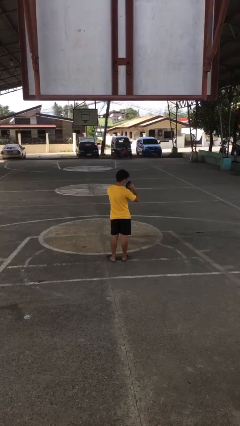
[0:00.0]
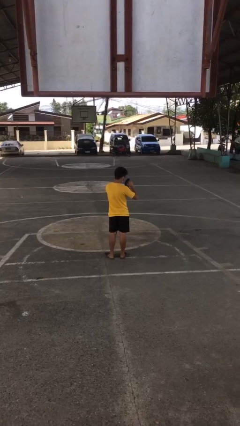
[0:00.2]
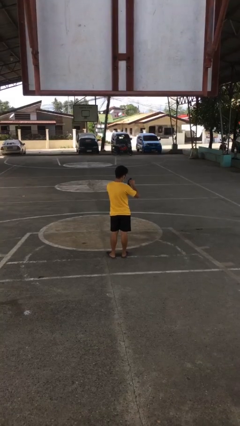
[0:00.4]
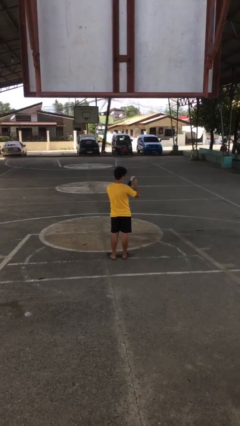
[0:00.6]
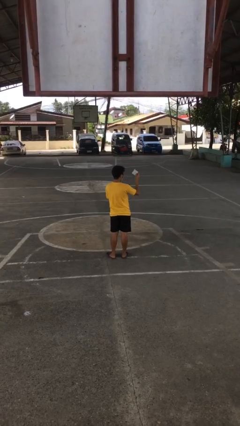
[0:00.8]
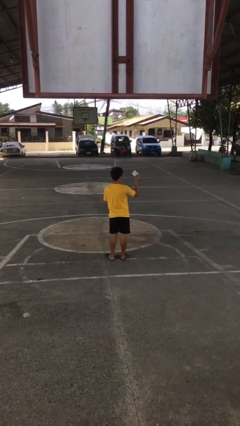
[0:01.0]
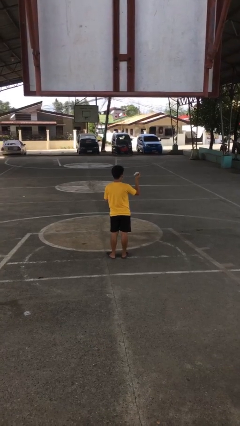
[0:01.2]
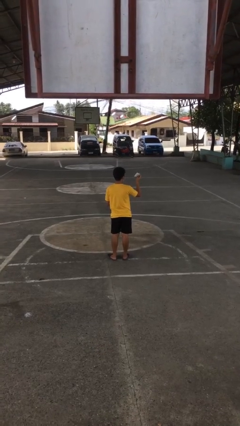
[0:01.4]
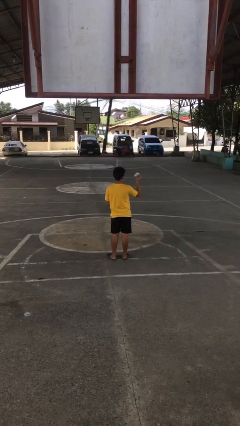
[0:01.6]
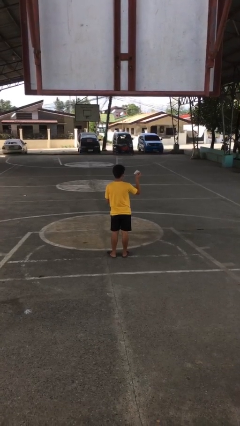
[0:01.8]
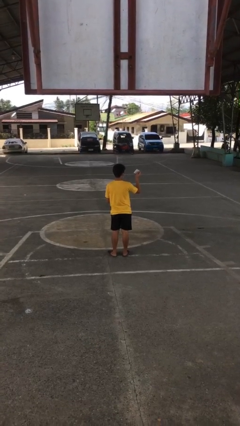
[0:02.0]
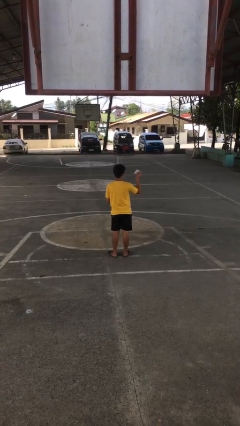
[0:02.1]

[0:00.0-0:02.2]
person takes object from purse

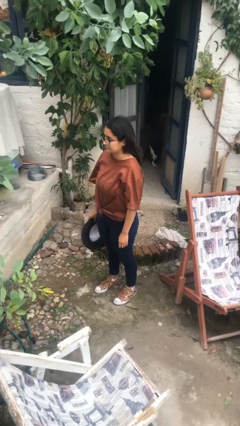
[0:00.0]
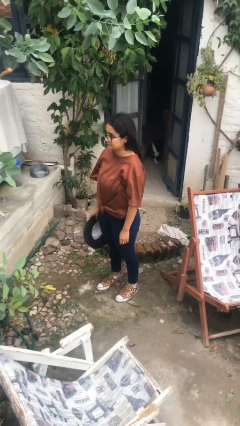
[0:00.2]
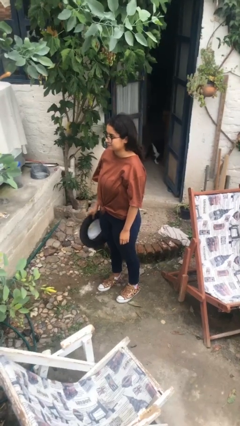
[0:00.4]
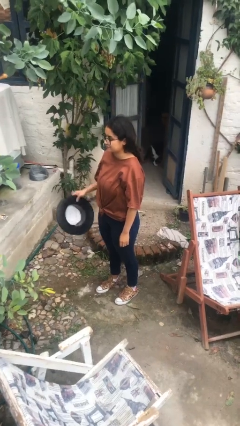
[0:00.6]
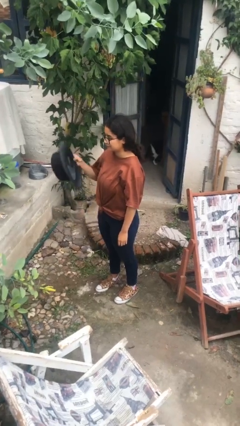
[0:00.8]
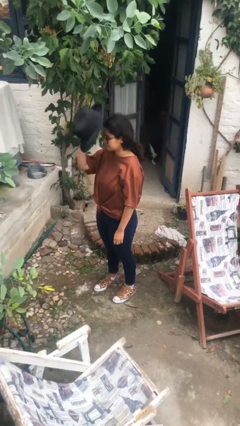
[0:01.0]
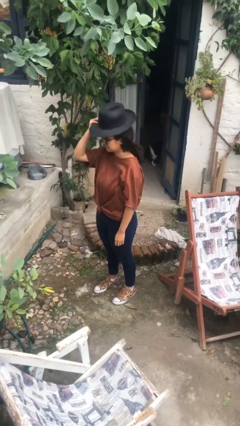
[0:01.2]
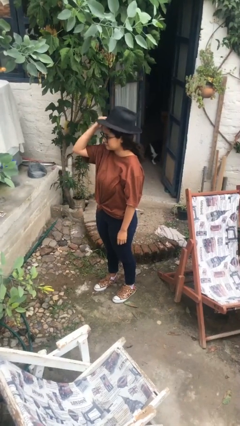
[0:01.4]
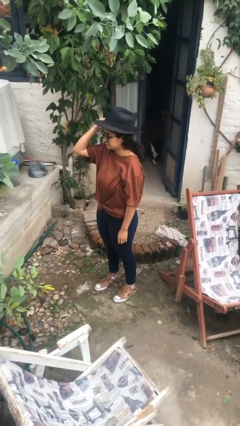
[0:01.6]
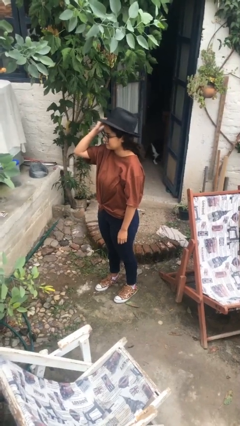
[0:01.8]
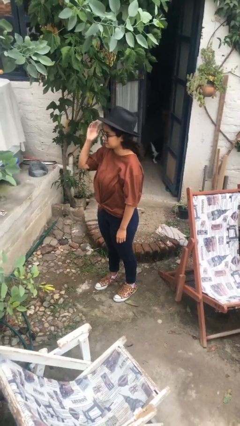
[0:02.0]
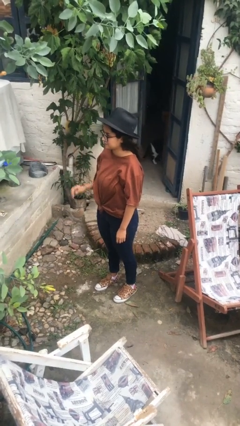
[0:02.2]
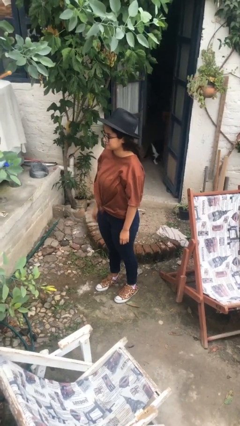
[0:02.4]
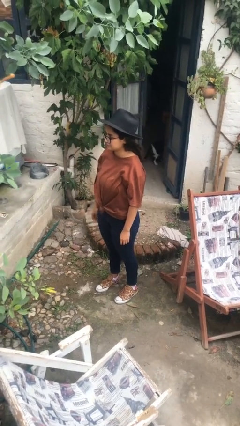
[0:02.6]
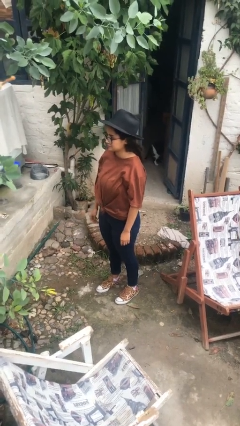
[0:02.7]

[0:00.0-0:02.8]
person puts on hat

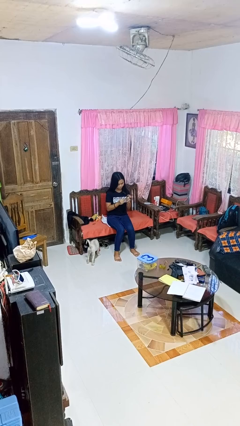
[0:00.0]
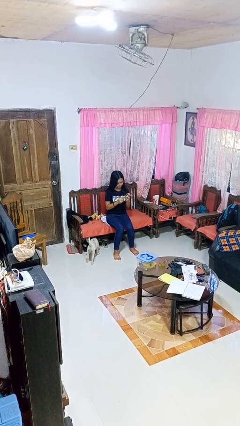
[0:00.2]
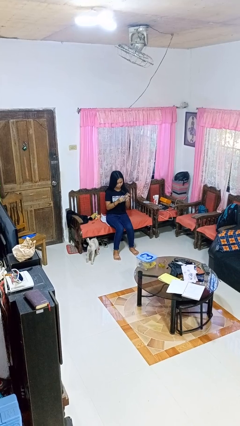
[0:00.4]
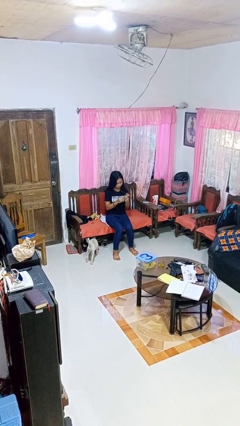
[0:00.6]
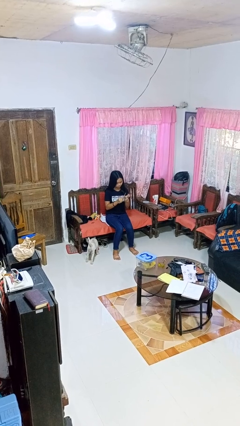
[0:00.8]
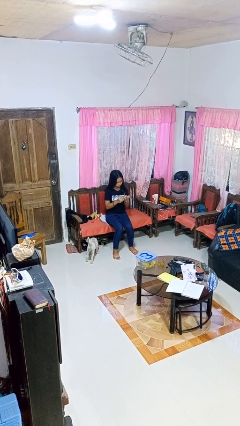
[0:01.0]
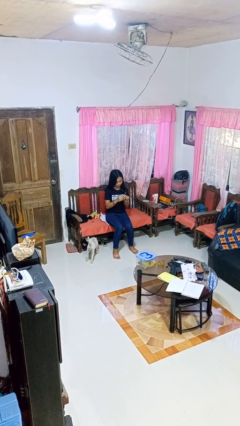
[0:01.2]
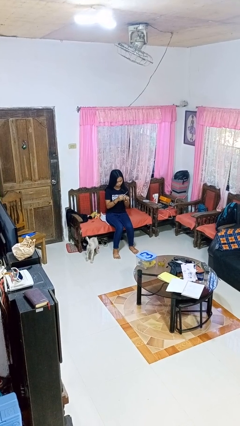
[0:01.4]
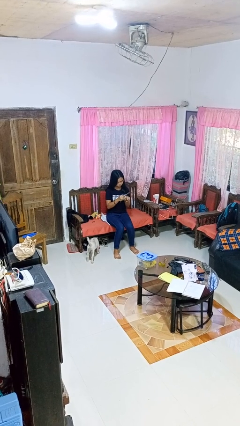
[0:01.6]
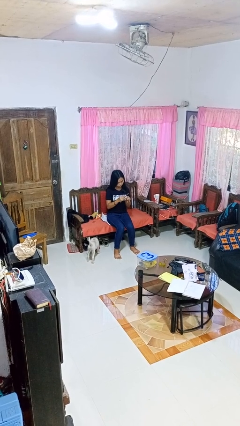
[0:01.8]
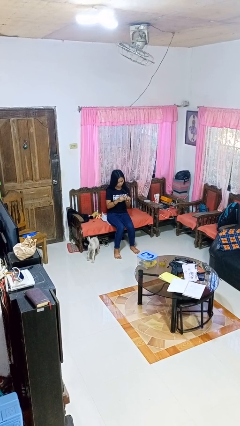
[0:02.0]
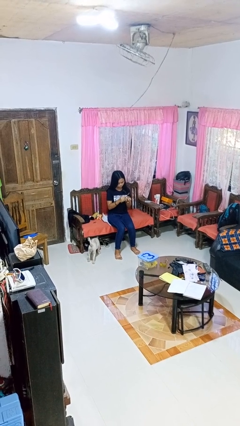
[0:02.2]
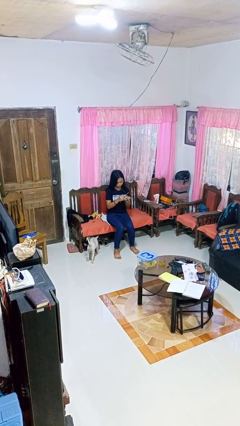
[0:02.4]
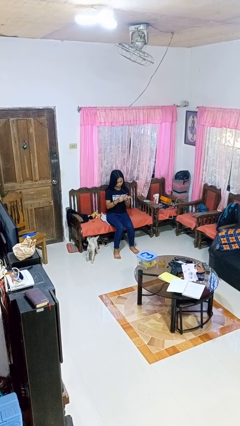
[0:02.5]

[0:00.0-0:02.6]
person files fingernails

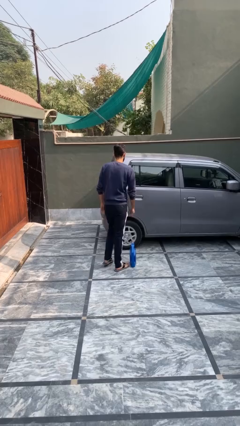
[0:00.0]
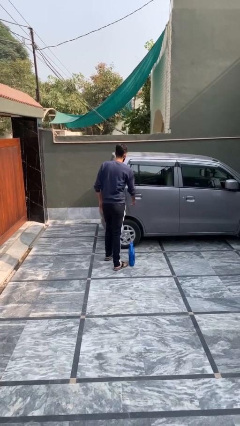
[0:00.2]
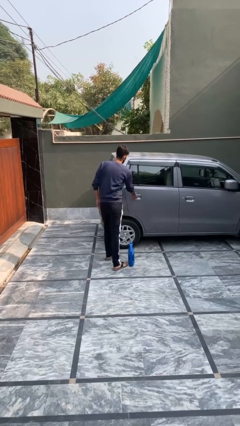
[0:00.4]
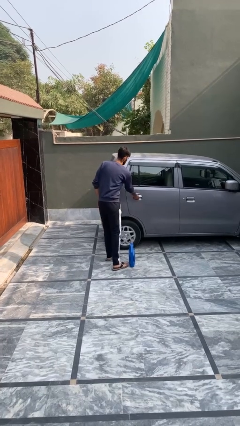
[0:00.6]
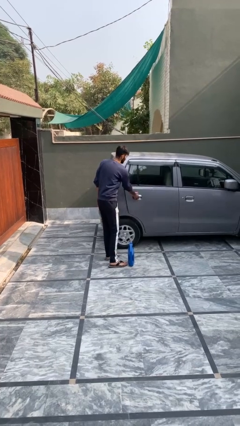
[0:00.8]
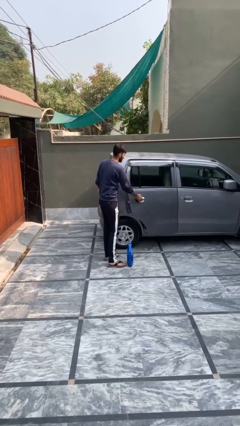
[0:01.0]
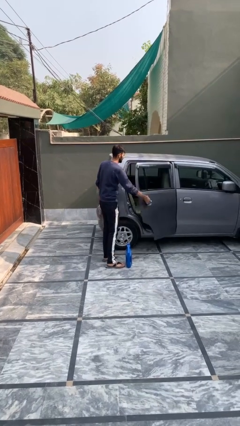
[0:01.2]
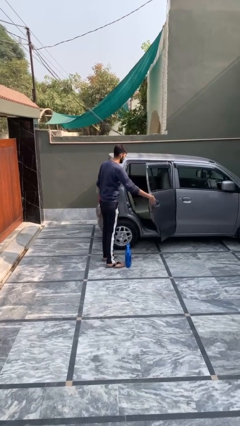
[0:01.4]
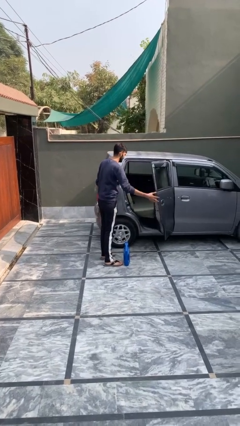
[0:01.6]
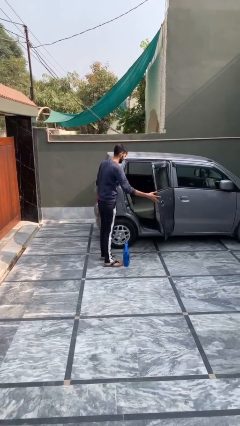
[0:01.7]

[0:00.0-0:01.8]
person opens car door

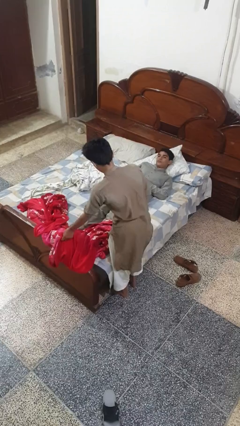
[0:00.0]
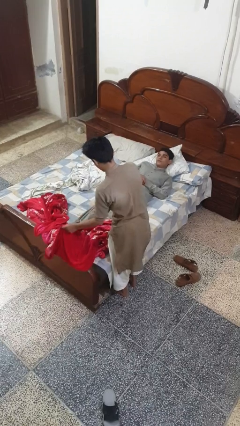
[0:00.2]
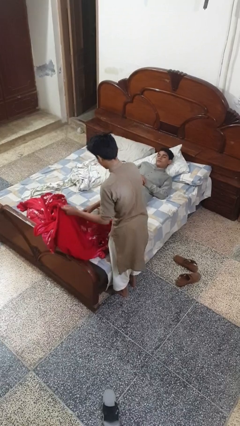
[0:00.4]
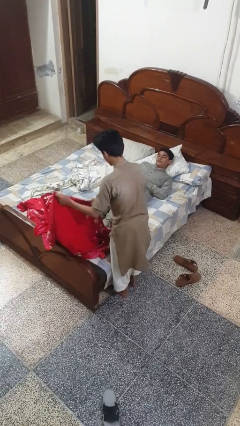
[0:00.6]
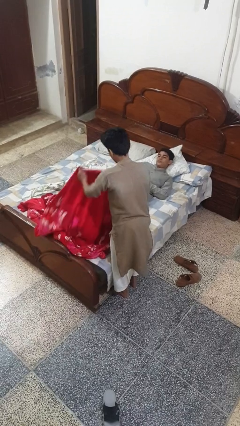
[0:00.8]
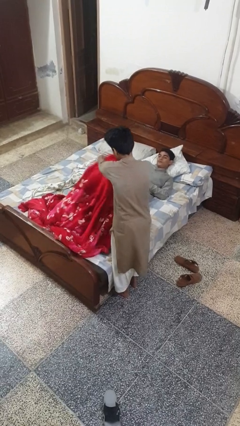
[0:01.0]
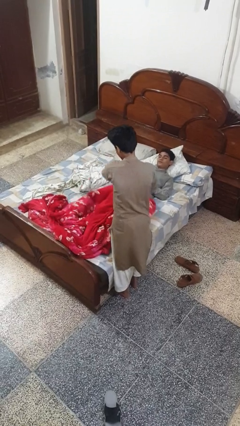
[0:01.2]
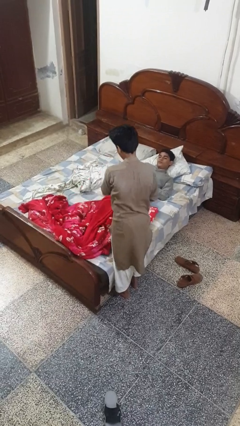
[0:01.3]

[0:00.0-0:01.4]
person covers friend with blanket

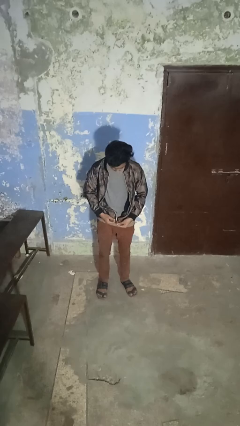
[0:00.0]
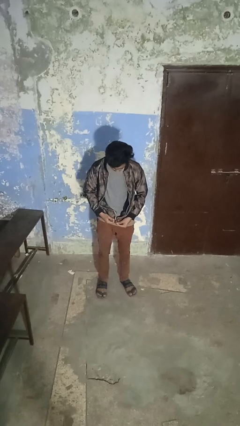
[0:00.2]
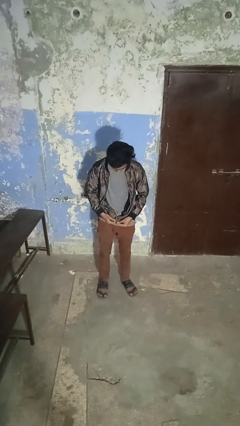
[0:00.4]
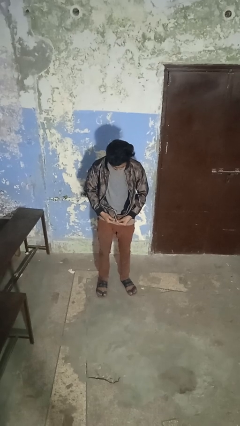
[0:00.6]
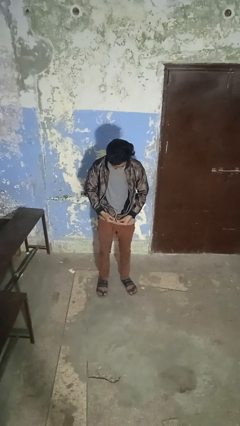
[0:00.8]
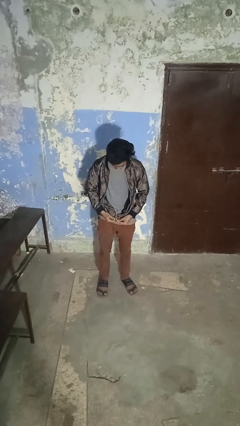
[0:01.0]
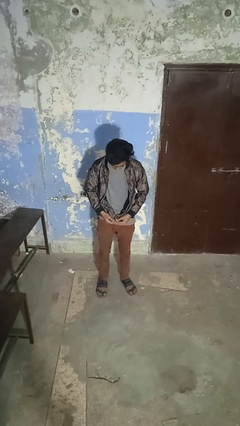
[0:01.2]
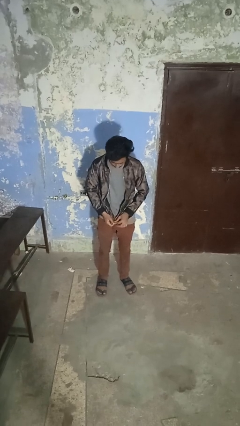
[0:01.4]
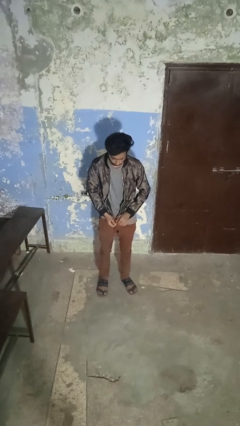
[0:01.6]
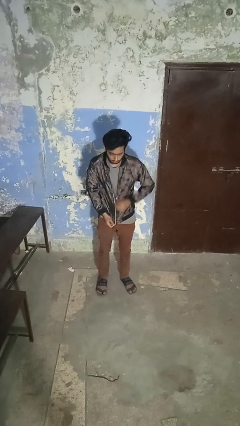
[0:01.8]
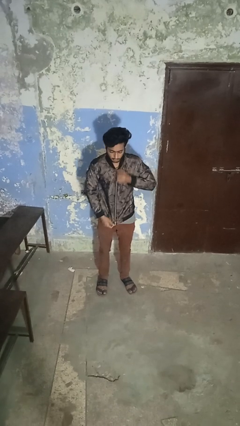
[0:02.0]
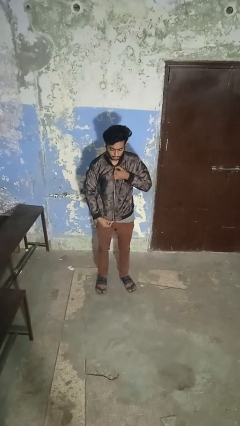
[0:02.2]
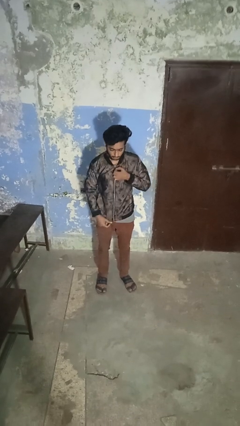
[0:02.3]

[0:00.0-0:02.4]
person zips up jacket

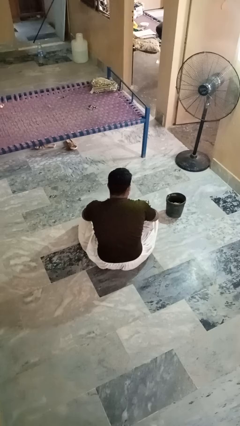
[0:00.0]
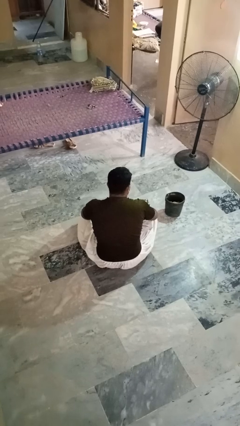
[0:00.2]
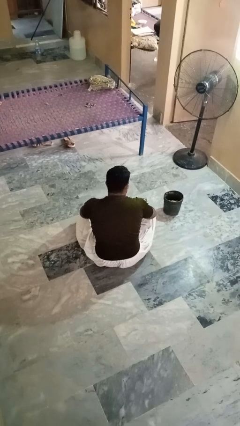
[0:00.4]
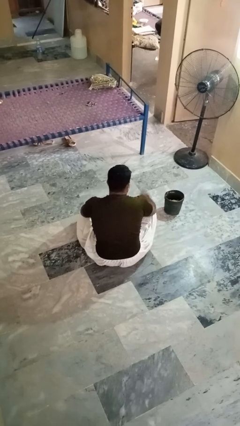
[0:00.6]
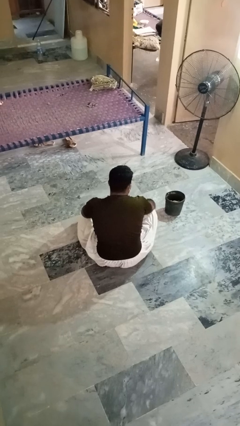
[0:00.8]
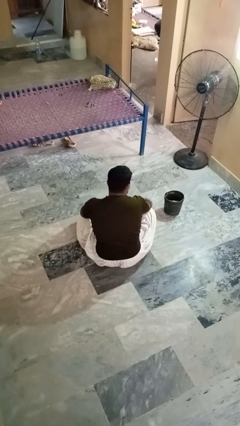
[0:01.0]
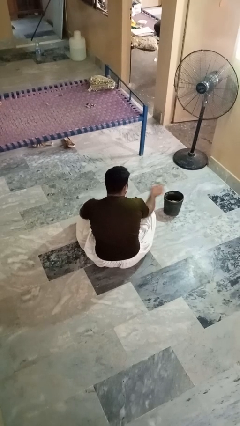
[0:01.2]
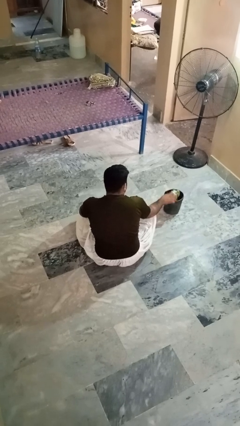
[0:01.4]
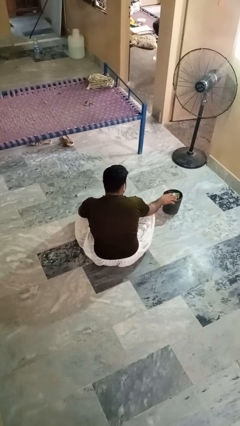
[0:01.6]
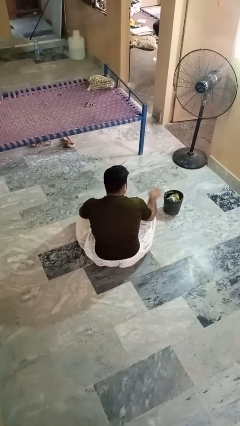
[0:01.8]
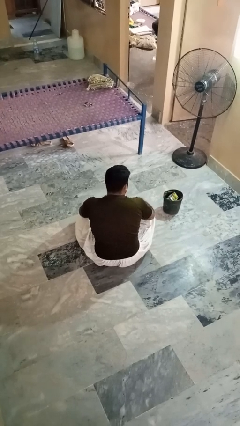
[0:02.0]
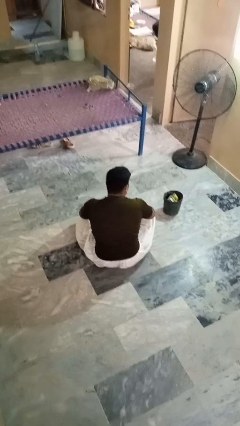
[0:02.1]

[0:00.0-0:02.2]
person puts object into basket

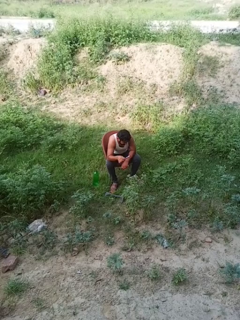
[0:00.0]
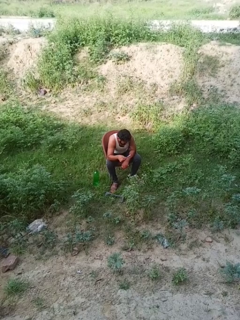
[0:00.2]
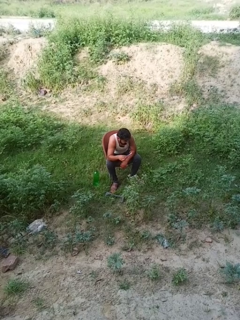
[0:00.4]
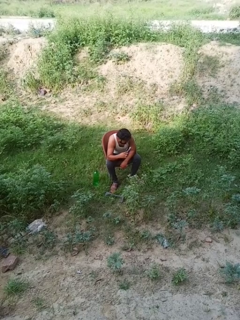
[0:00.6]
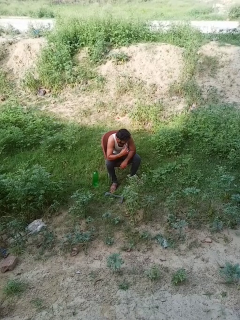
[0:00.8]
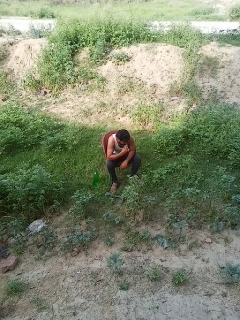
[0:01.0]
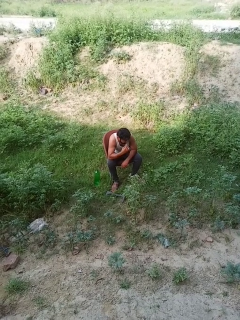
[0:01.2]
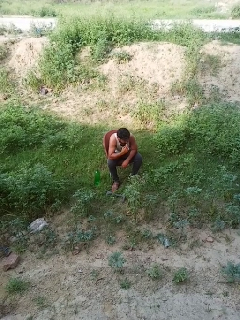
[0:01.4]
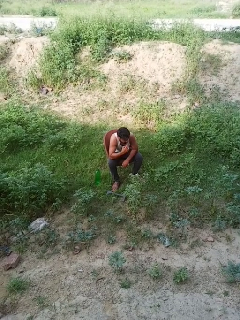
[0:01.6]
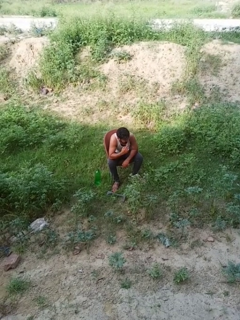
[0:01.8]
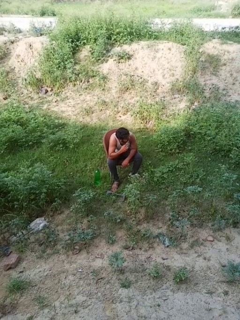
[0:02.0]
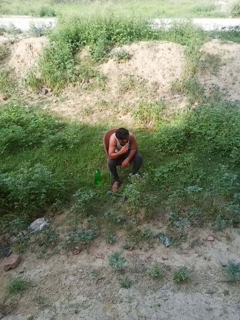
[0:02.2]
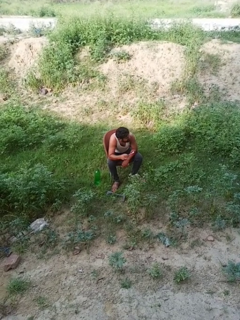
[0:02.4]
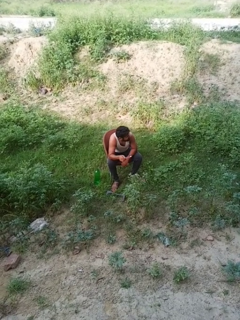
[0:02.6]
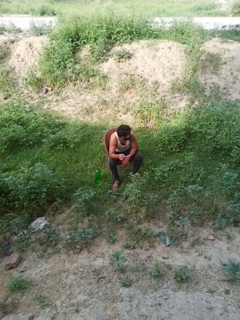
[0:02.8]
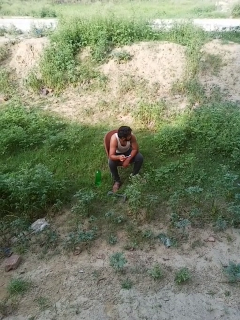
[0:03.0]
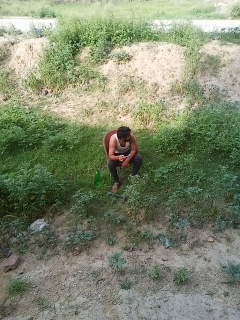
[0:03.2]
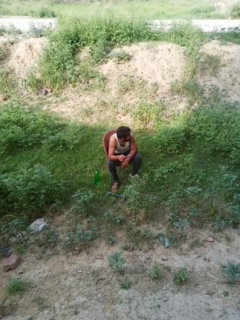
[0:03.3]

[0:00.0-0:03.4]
person brushes teeth
